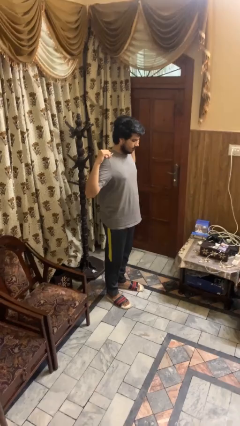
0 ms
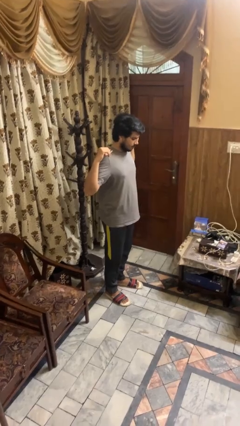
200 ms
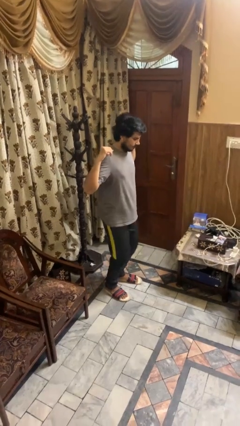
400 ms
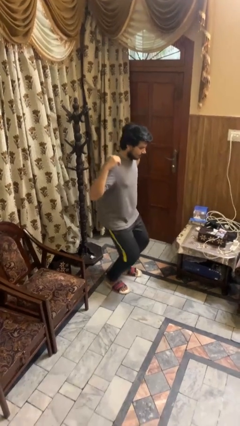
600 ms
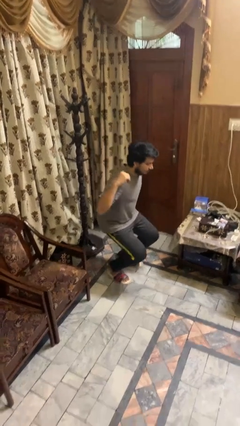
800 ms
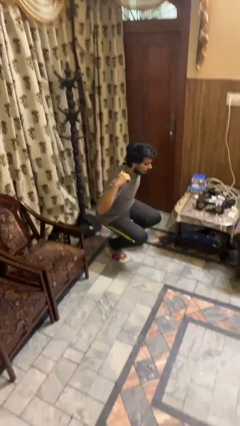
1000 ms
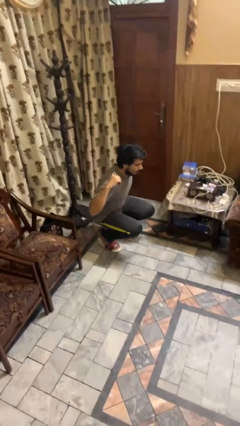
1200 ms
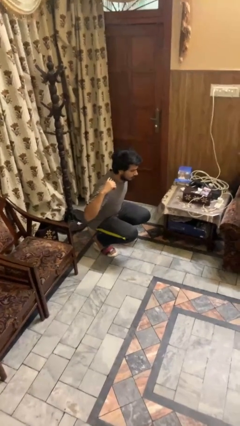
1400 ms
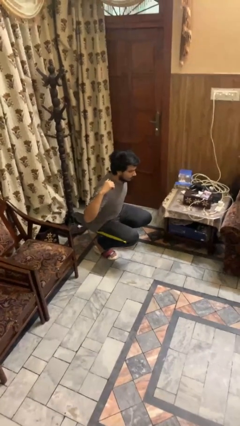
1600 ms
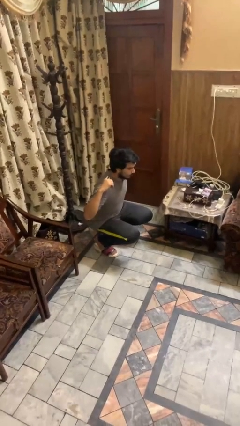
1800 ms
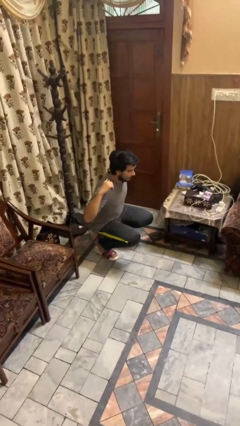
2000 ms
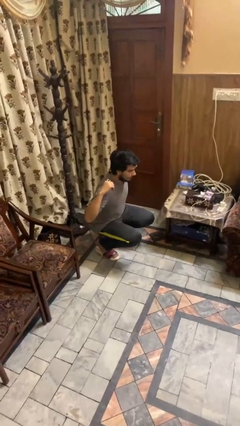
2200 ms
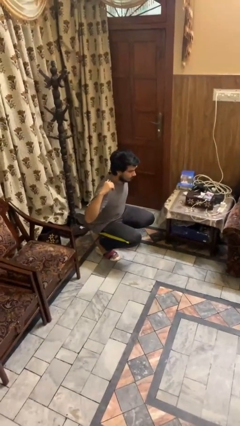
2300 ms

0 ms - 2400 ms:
person squats

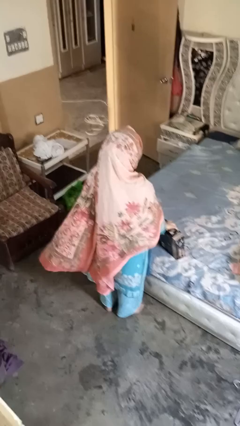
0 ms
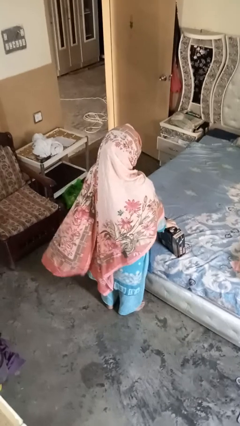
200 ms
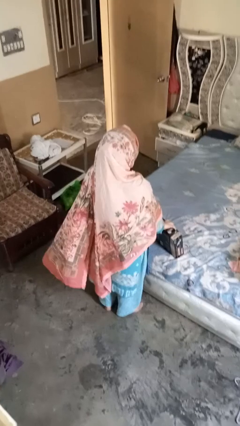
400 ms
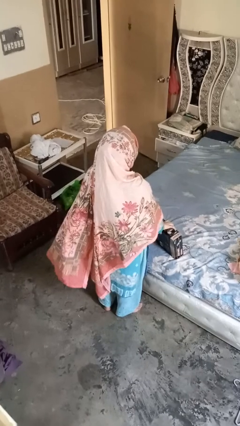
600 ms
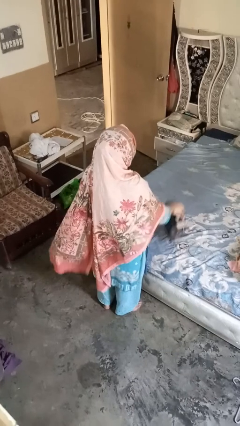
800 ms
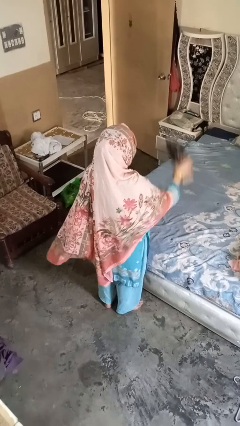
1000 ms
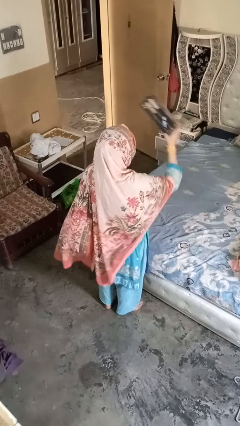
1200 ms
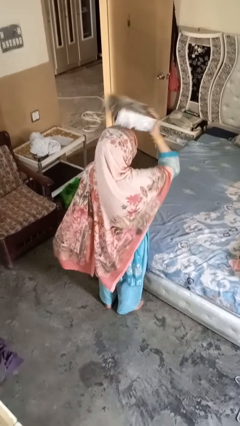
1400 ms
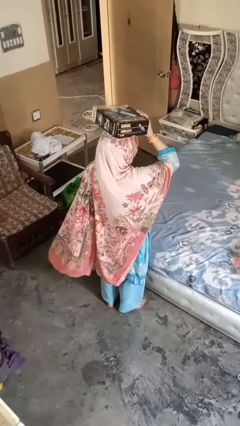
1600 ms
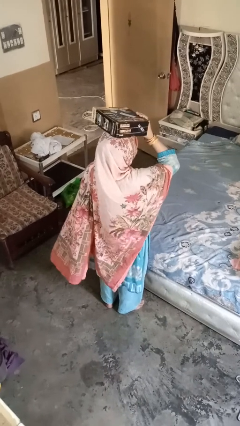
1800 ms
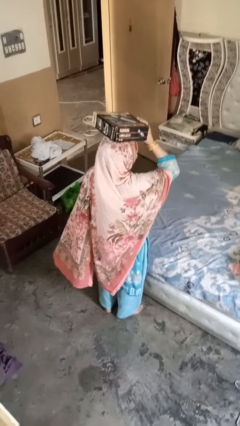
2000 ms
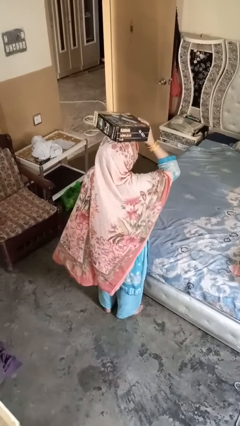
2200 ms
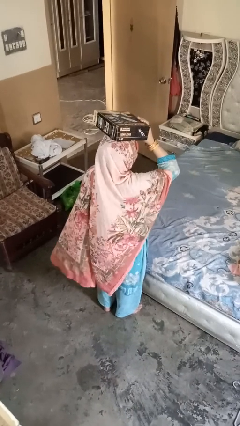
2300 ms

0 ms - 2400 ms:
person holds object above head

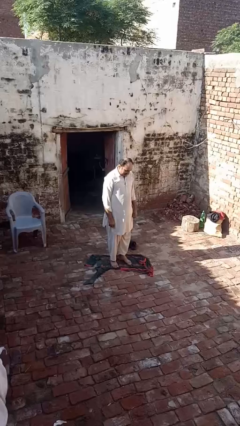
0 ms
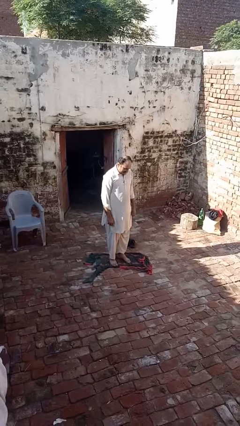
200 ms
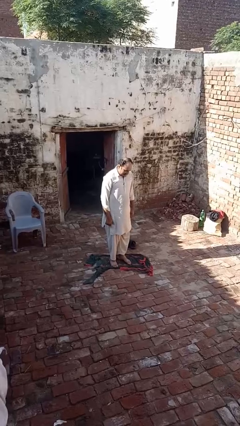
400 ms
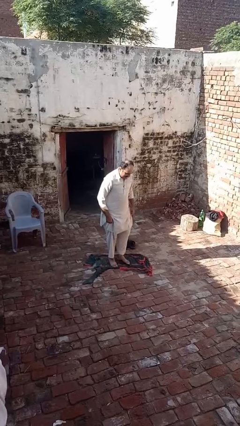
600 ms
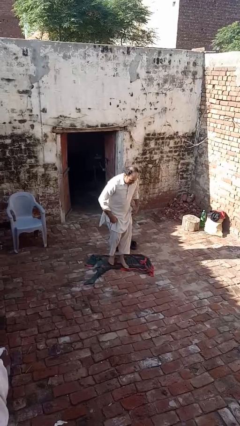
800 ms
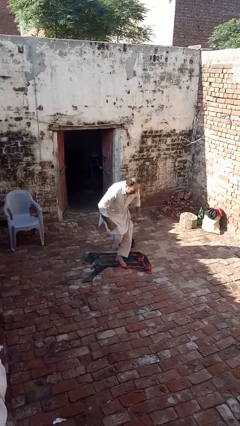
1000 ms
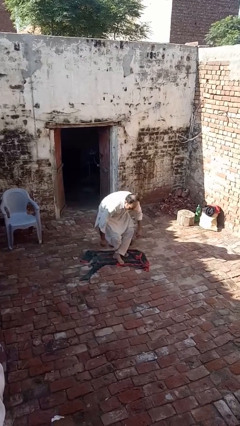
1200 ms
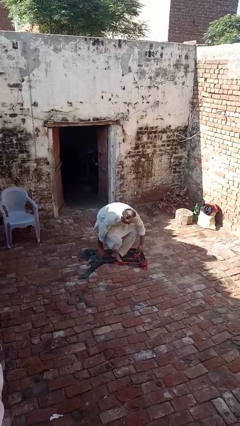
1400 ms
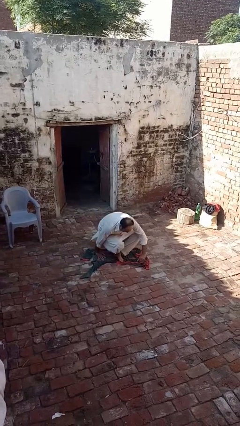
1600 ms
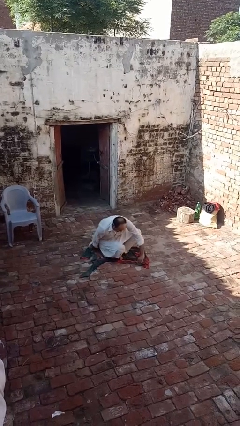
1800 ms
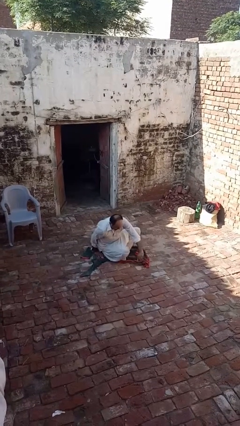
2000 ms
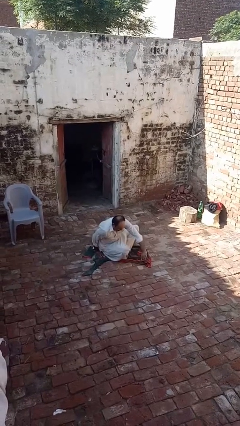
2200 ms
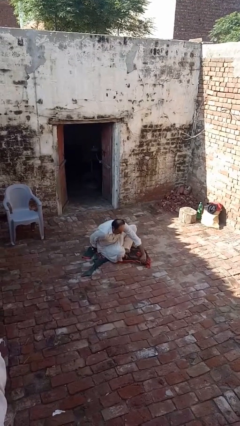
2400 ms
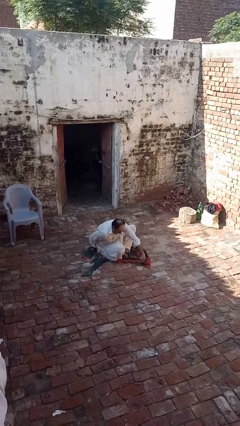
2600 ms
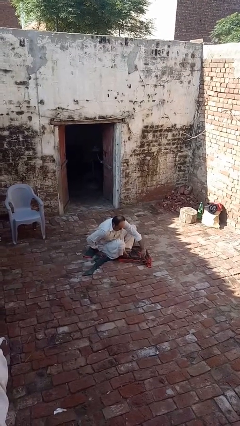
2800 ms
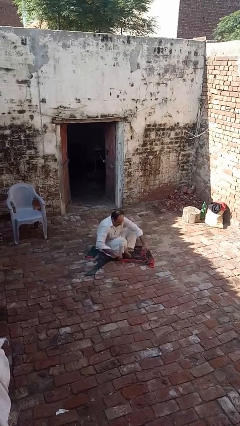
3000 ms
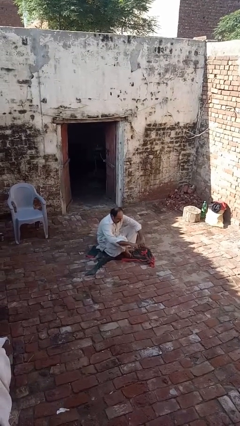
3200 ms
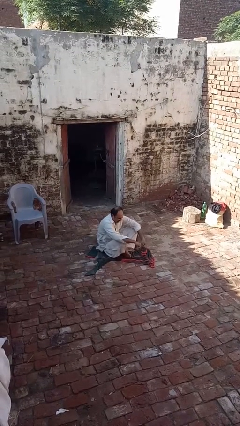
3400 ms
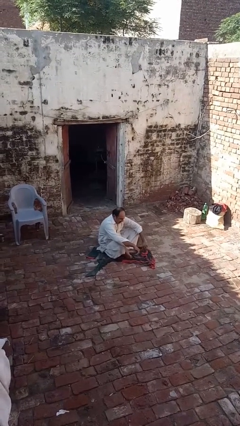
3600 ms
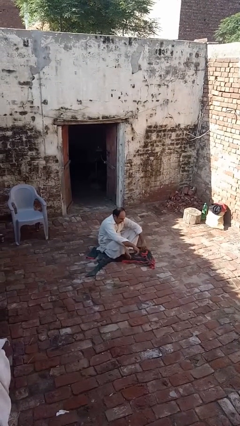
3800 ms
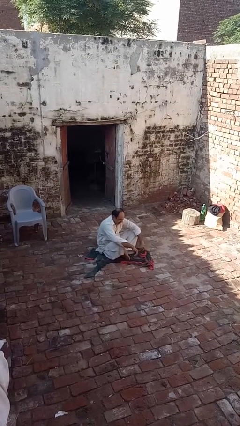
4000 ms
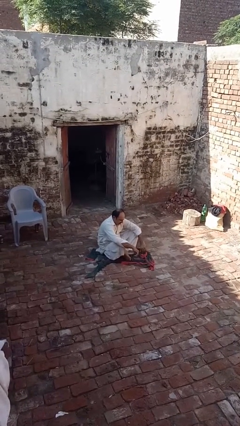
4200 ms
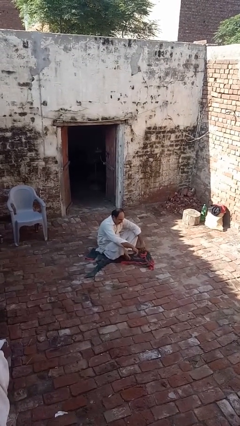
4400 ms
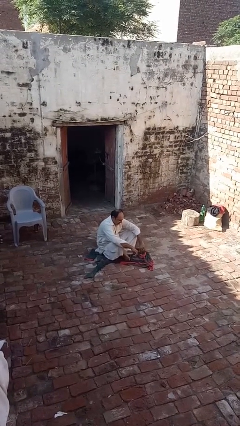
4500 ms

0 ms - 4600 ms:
person sits crisscross

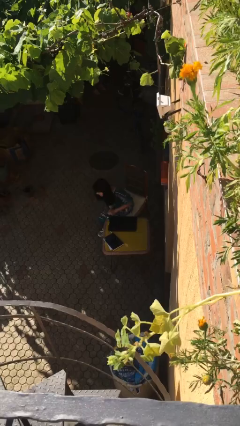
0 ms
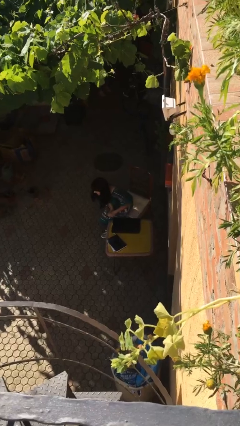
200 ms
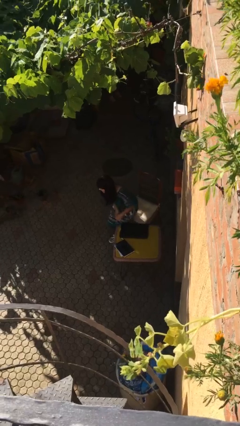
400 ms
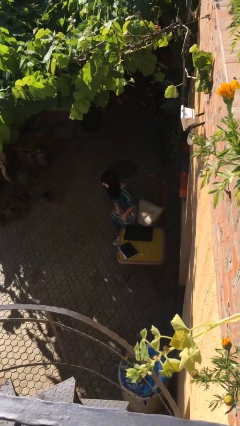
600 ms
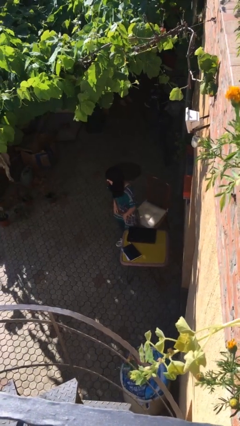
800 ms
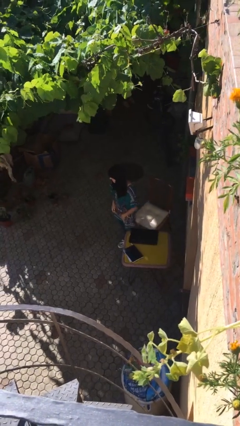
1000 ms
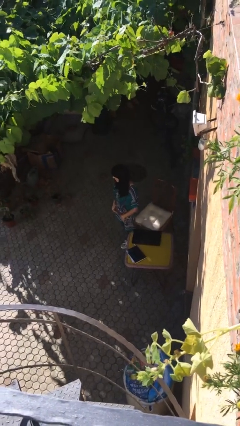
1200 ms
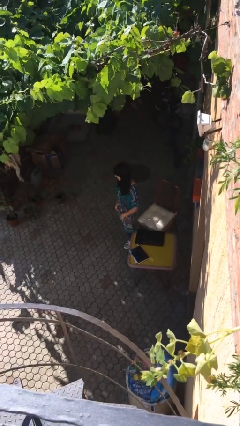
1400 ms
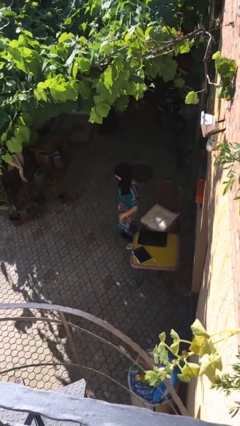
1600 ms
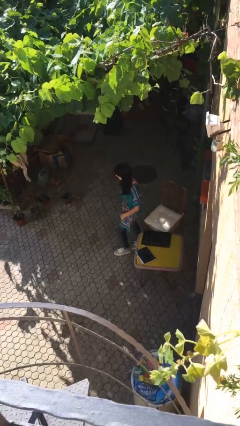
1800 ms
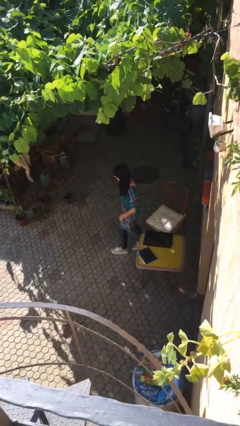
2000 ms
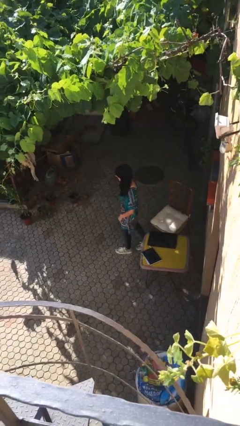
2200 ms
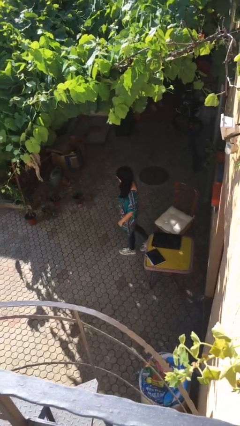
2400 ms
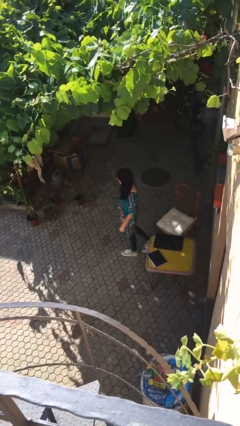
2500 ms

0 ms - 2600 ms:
person stands up

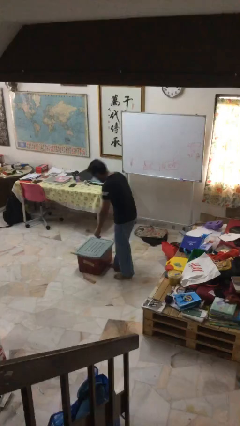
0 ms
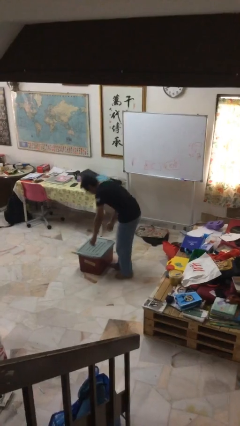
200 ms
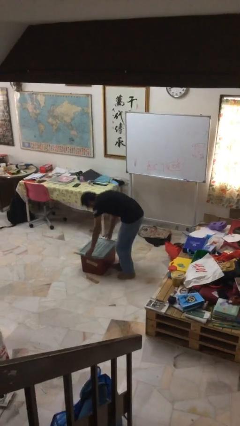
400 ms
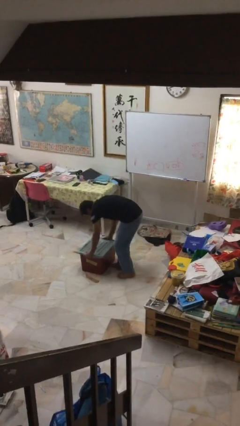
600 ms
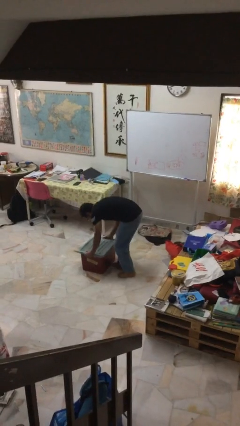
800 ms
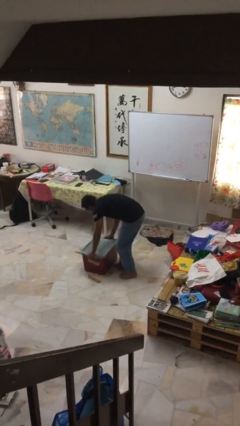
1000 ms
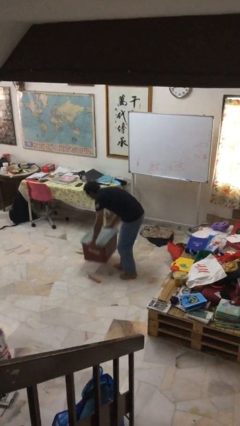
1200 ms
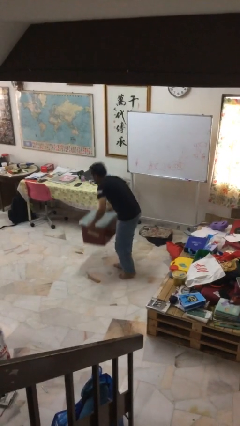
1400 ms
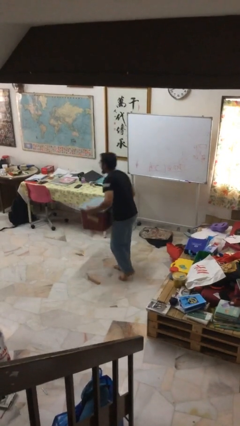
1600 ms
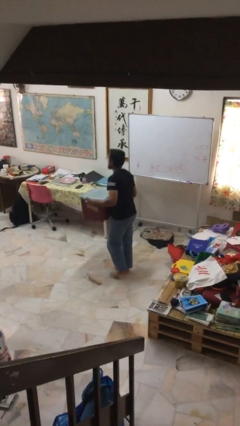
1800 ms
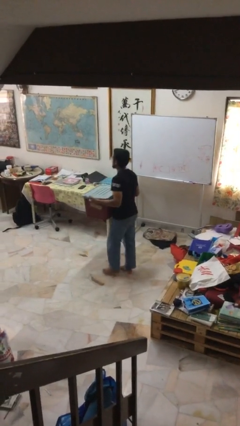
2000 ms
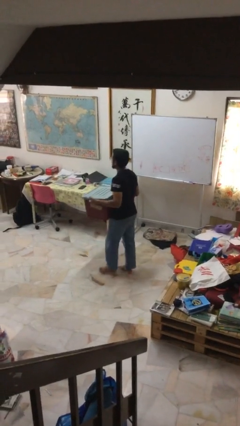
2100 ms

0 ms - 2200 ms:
person picks up object from floor

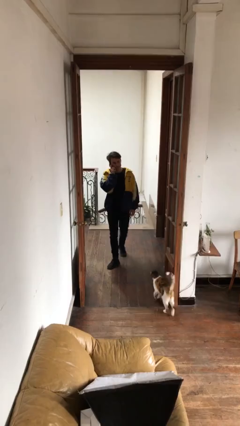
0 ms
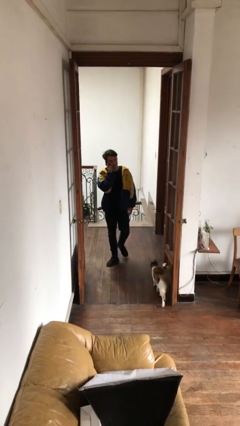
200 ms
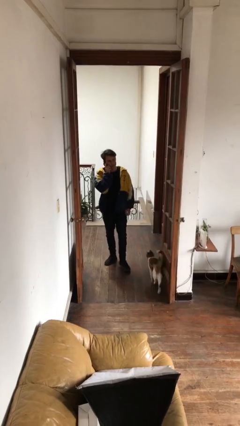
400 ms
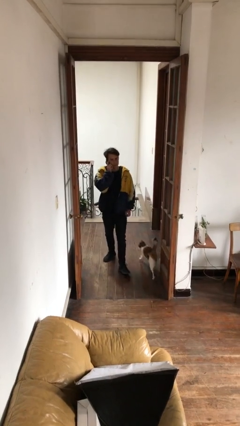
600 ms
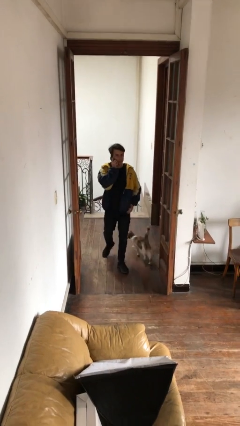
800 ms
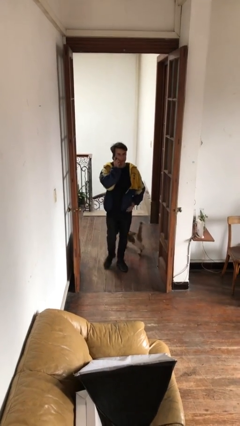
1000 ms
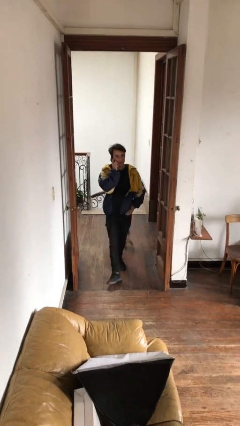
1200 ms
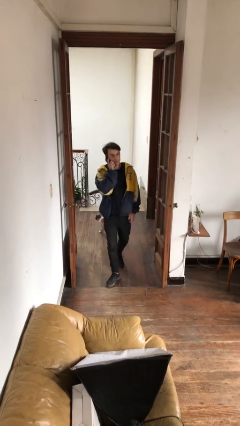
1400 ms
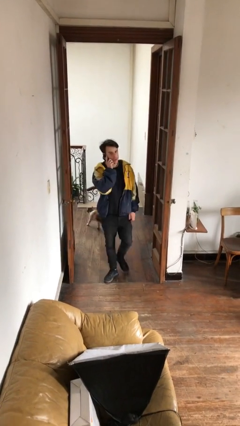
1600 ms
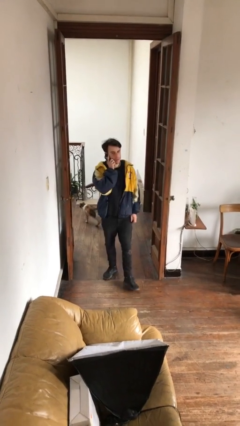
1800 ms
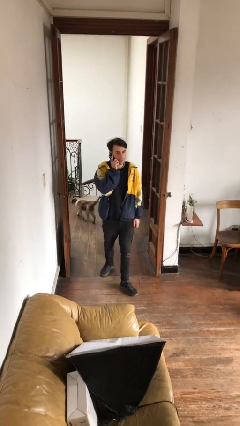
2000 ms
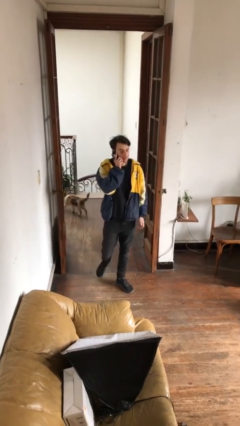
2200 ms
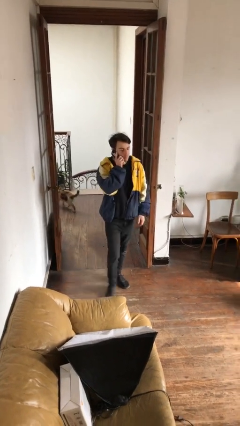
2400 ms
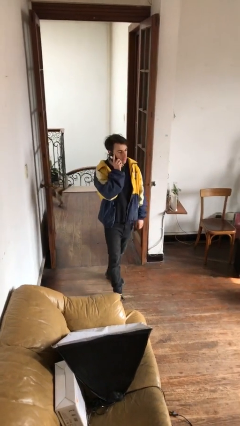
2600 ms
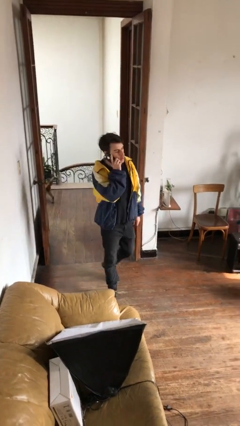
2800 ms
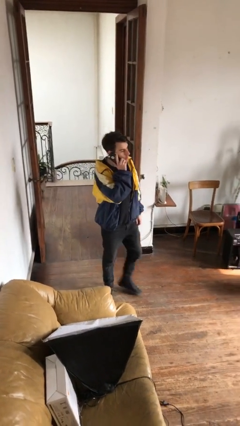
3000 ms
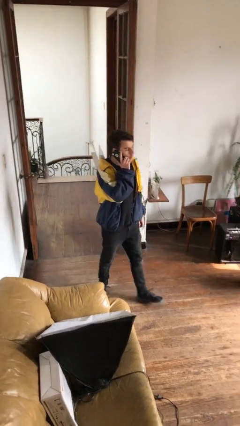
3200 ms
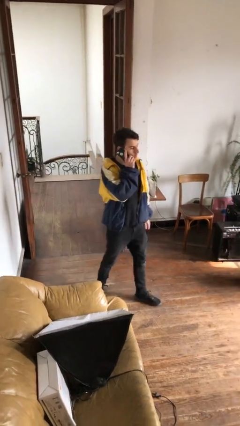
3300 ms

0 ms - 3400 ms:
person enters scene through structure
